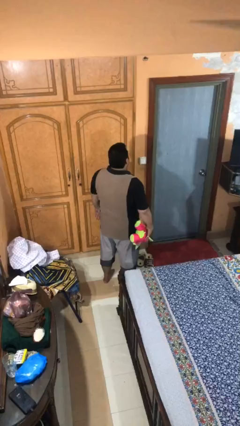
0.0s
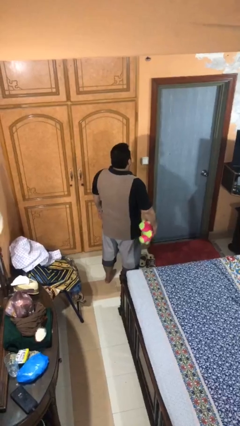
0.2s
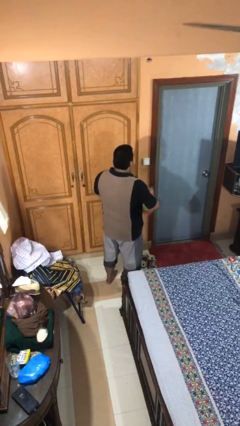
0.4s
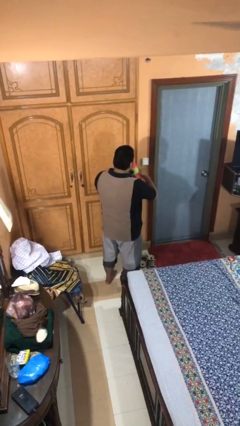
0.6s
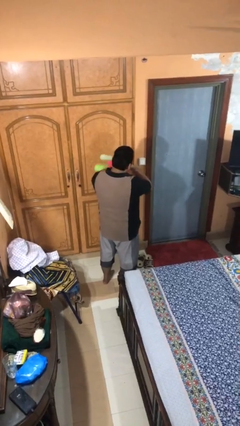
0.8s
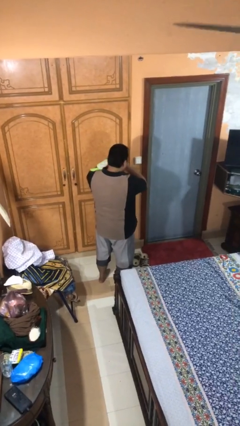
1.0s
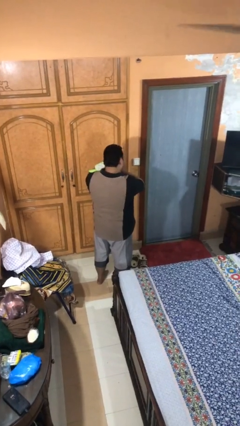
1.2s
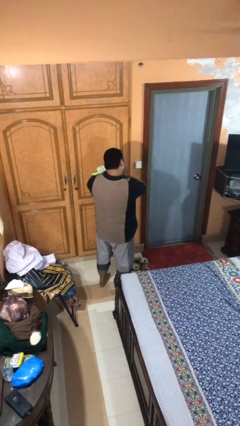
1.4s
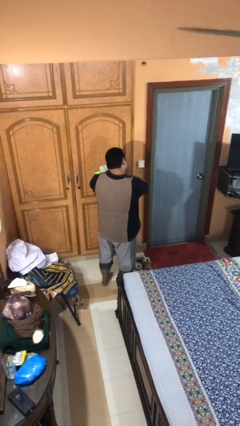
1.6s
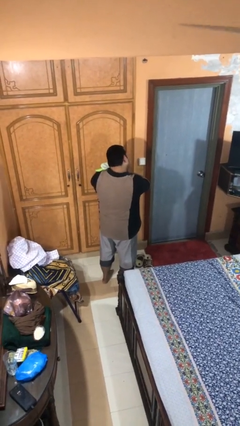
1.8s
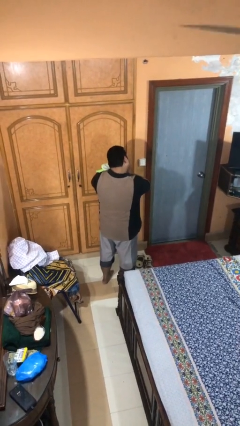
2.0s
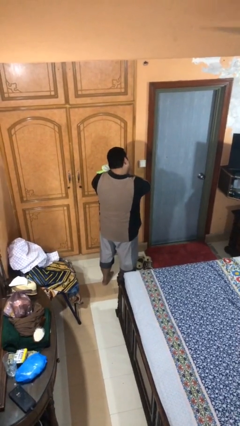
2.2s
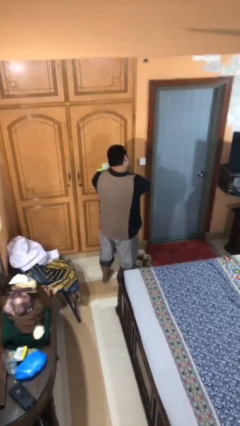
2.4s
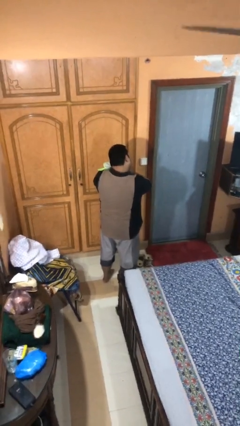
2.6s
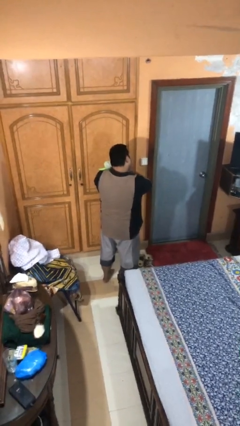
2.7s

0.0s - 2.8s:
person hugs stuffed animal

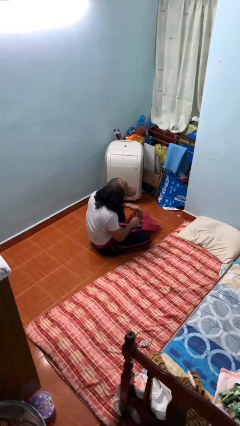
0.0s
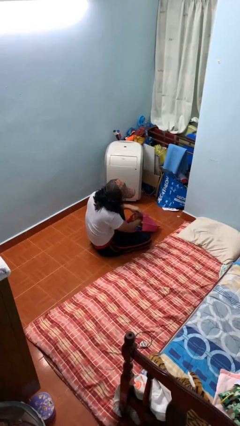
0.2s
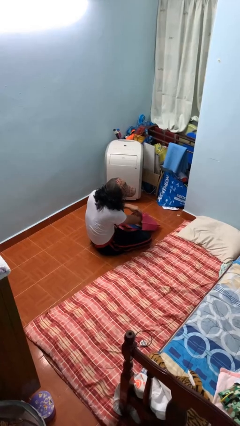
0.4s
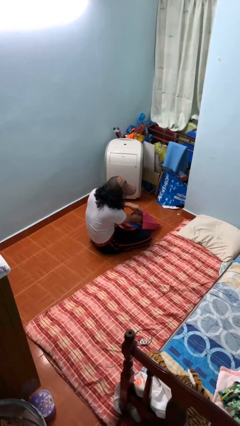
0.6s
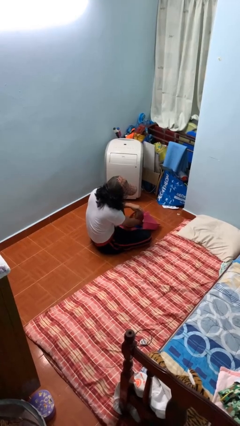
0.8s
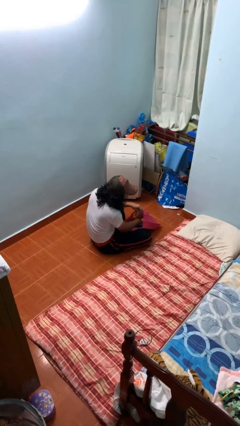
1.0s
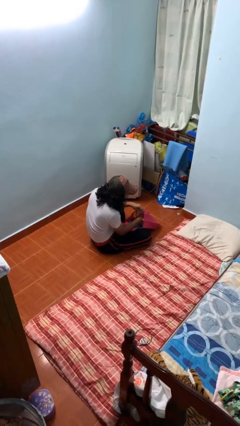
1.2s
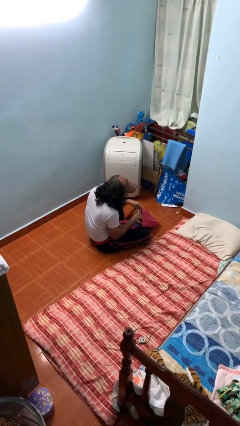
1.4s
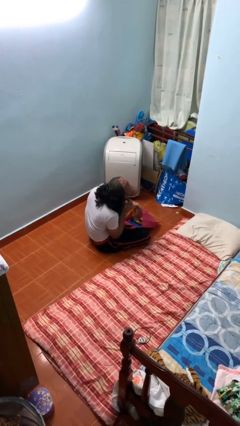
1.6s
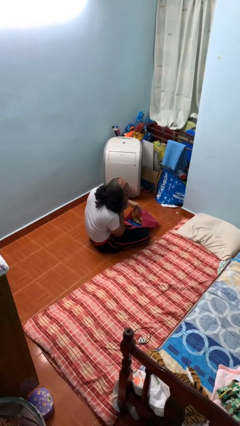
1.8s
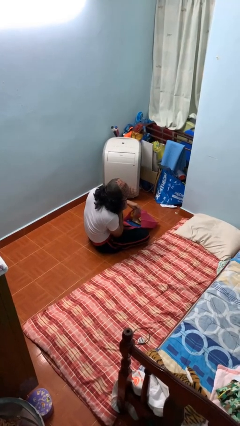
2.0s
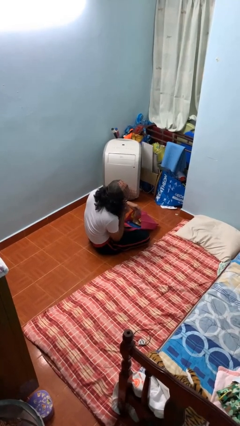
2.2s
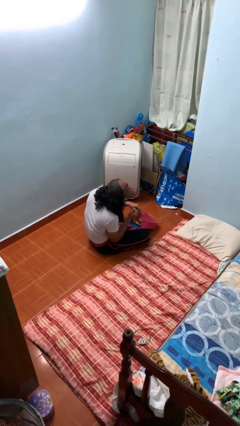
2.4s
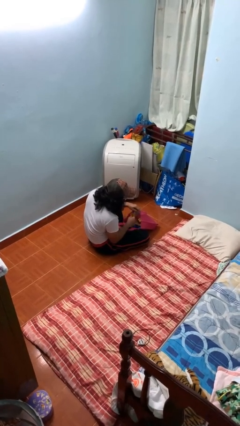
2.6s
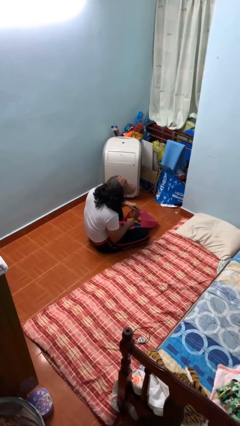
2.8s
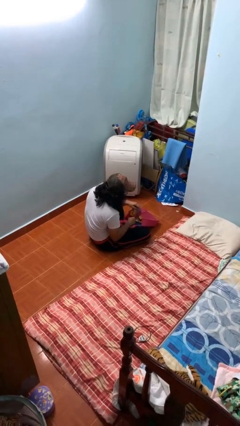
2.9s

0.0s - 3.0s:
person eats snack from bag

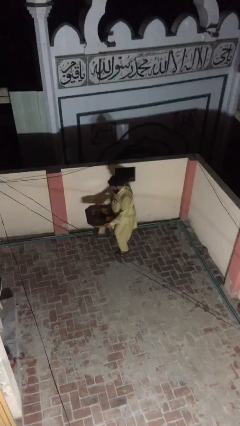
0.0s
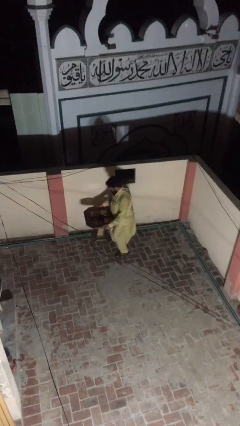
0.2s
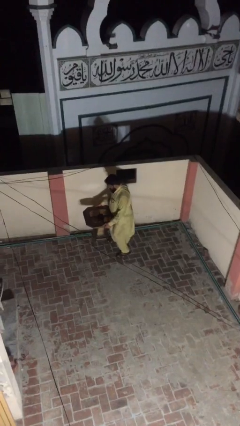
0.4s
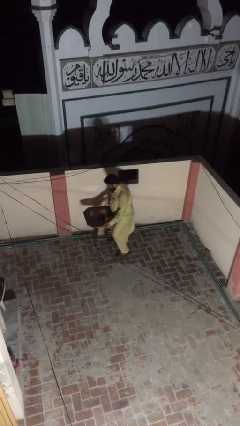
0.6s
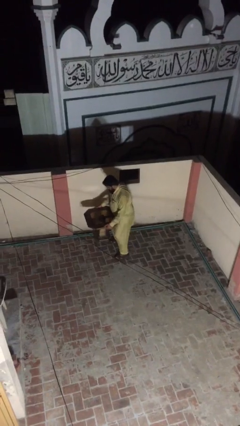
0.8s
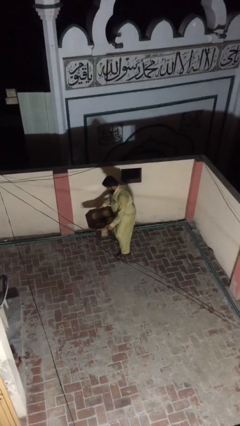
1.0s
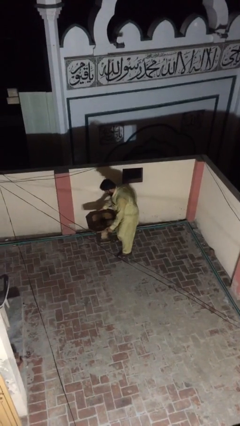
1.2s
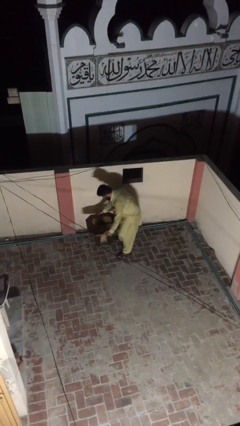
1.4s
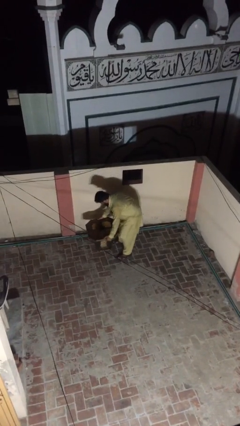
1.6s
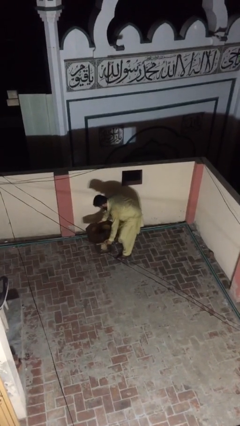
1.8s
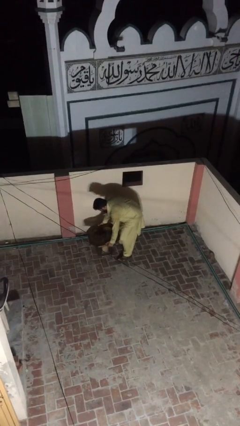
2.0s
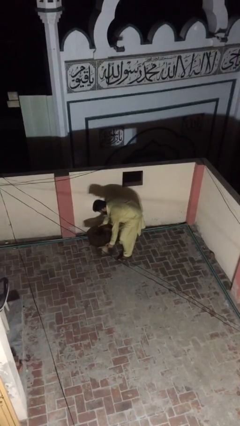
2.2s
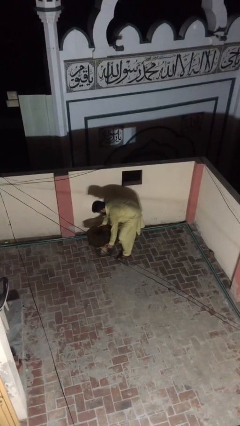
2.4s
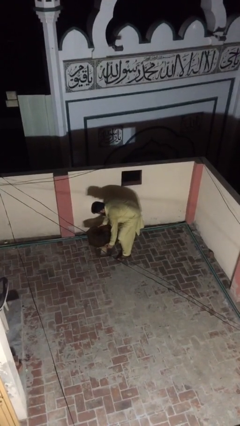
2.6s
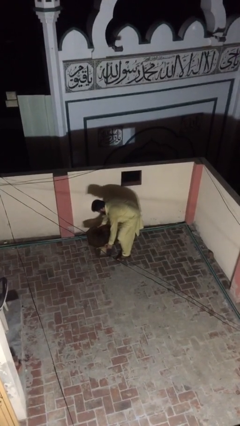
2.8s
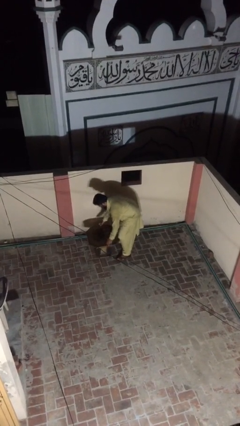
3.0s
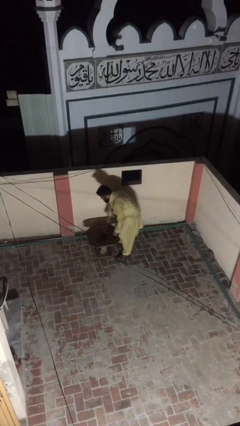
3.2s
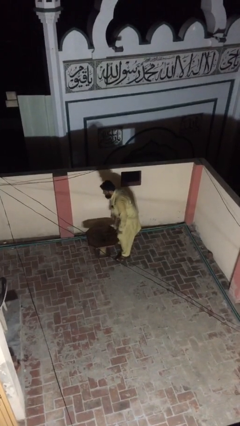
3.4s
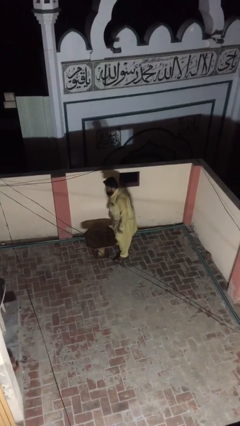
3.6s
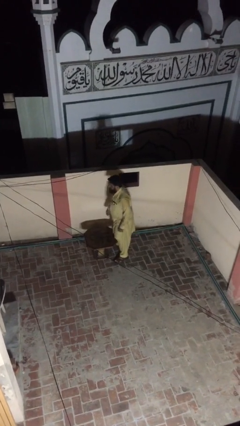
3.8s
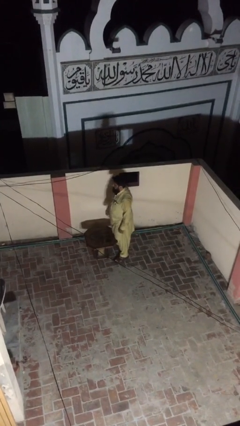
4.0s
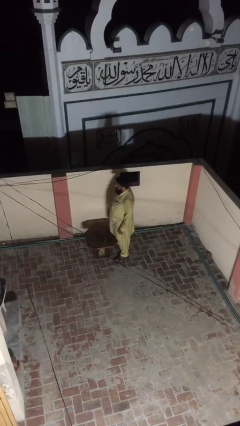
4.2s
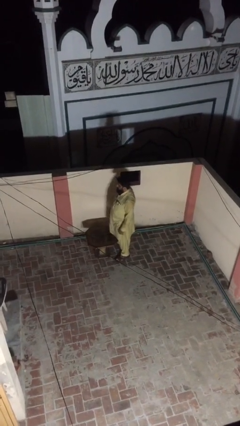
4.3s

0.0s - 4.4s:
person puts down object on floor

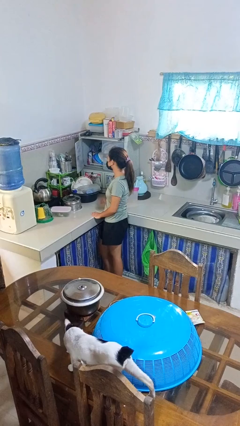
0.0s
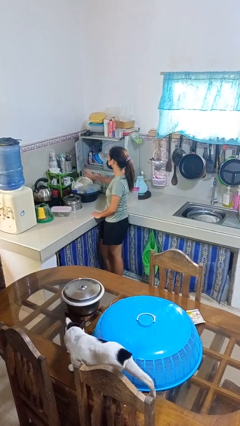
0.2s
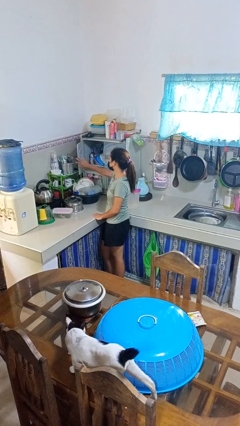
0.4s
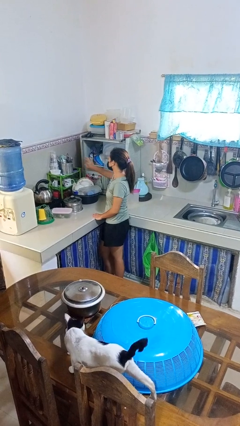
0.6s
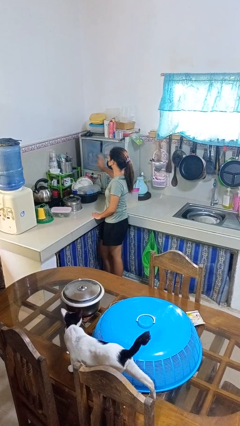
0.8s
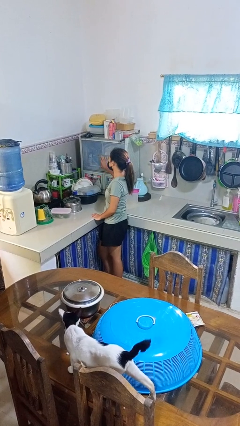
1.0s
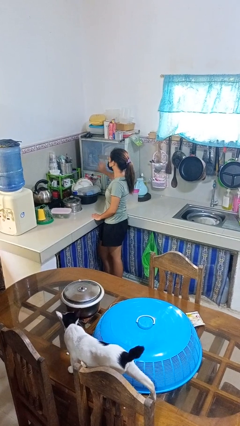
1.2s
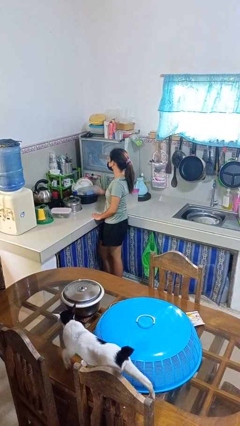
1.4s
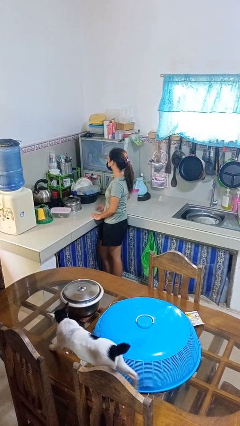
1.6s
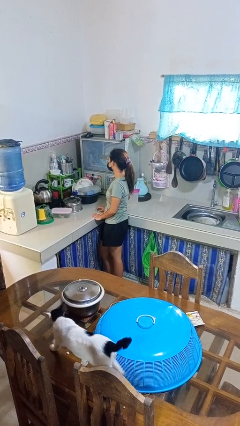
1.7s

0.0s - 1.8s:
person closes kitchen drawer

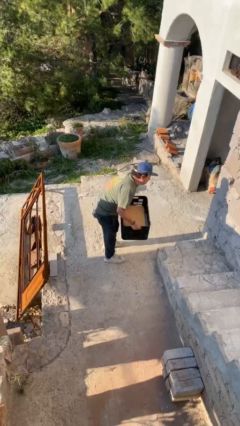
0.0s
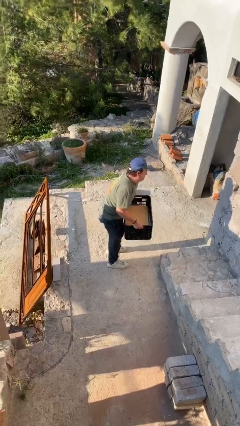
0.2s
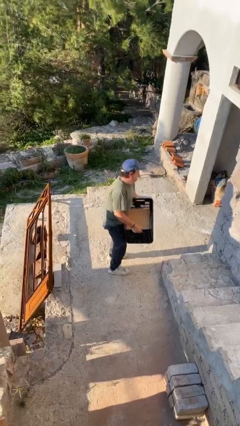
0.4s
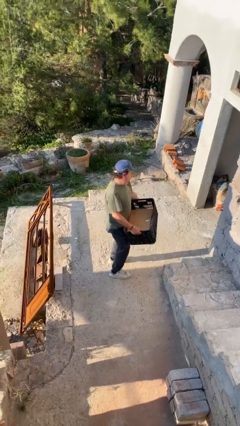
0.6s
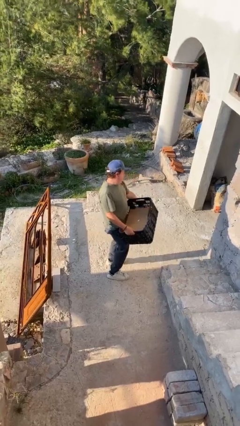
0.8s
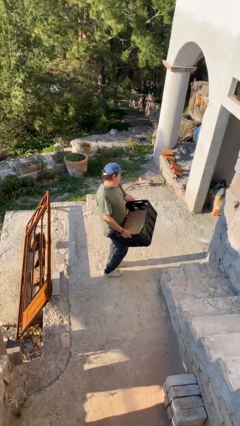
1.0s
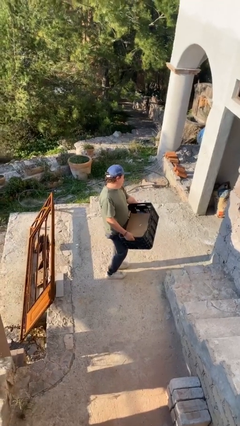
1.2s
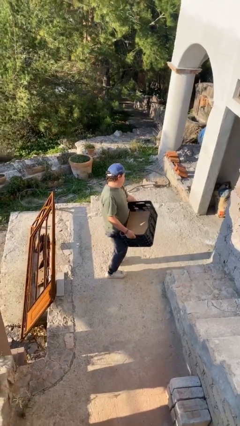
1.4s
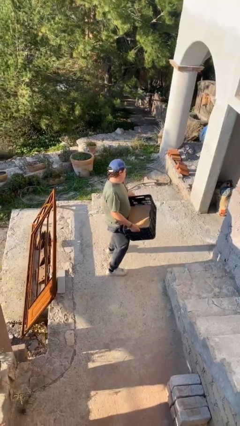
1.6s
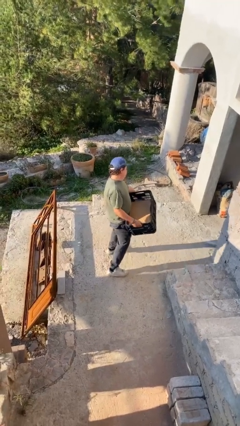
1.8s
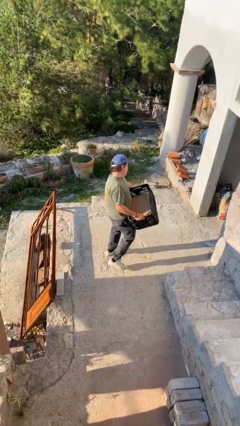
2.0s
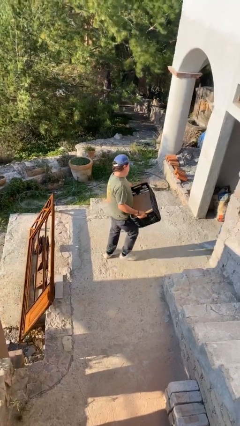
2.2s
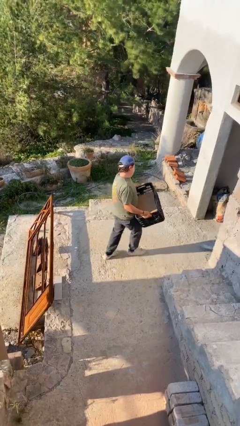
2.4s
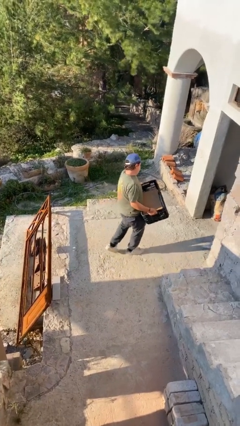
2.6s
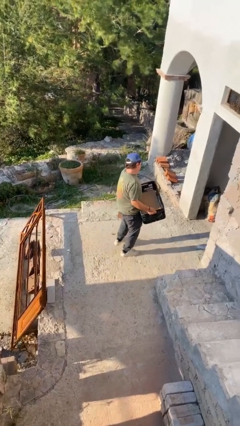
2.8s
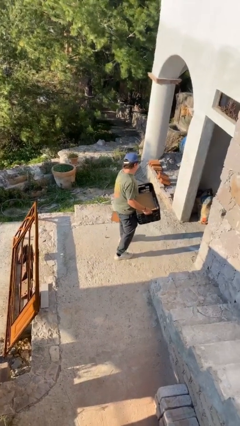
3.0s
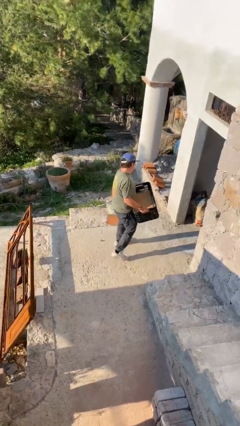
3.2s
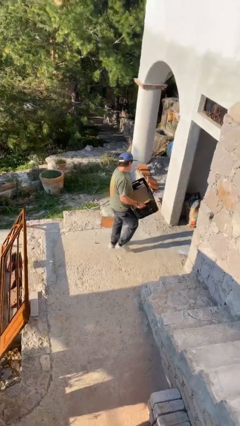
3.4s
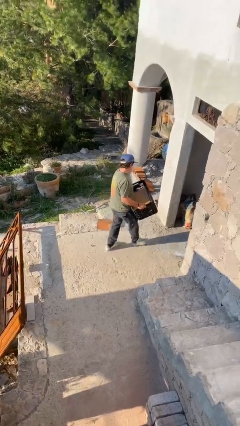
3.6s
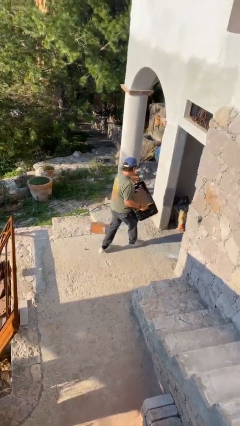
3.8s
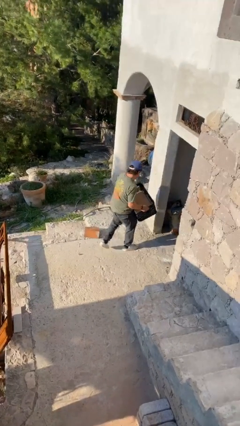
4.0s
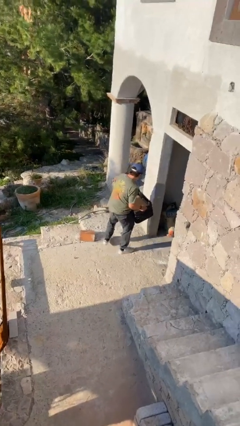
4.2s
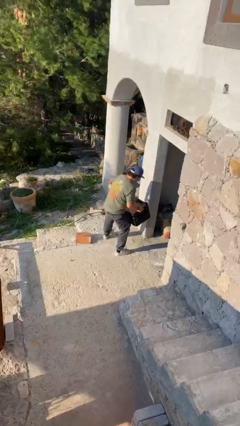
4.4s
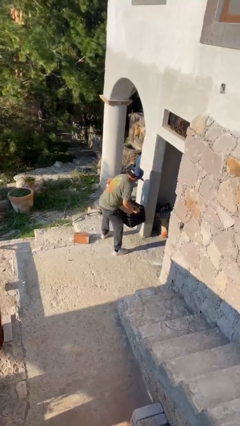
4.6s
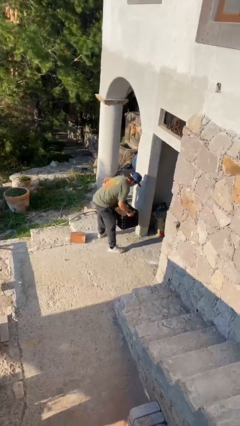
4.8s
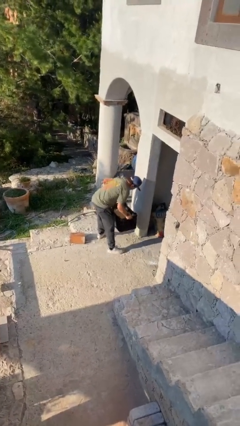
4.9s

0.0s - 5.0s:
person carries heavy object

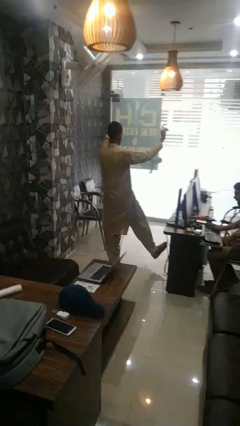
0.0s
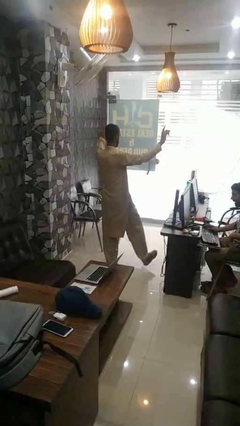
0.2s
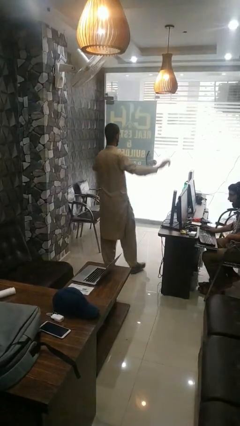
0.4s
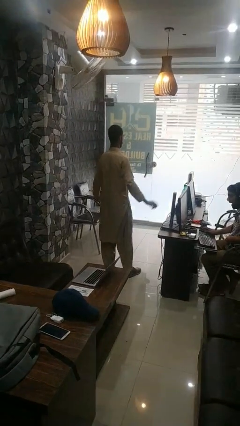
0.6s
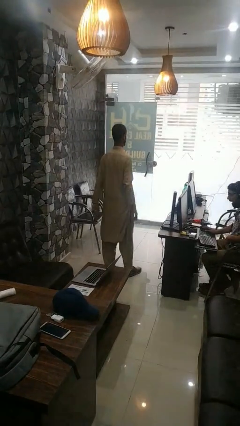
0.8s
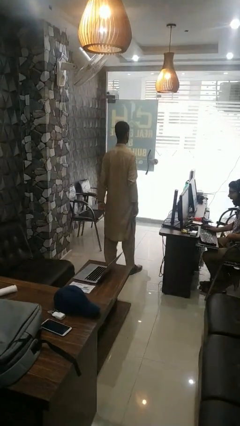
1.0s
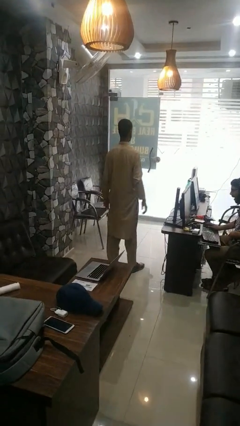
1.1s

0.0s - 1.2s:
person dances in place
